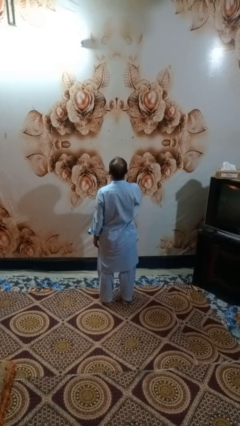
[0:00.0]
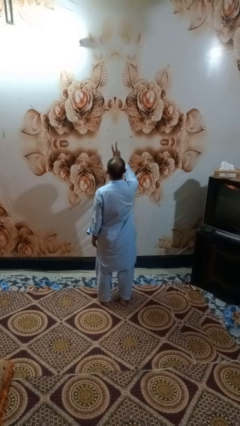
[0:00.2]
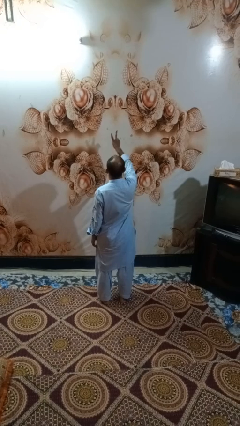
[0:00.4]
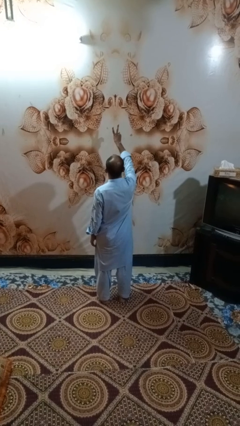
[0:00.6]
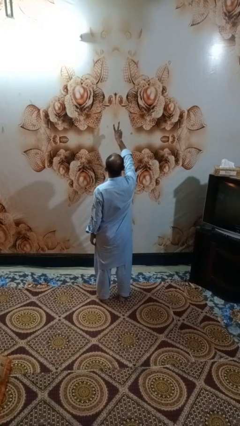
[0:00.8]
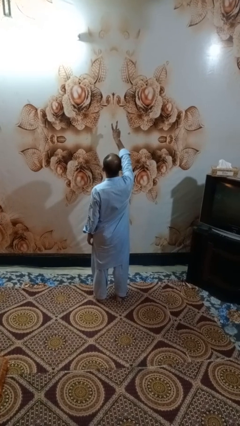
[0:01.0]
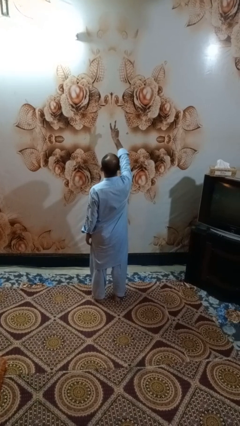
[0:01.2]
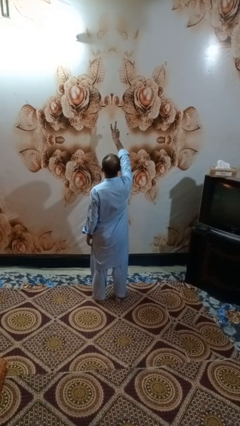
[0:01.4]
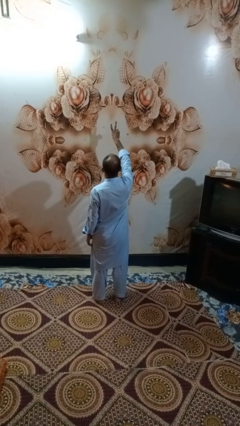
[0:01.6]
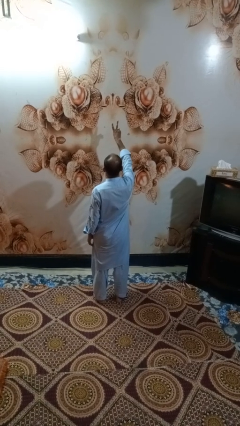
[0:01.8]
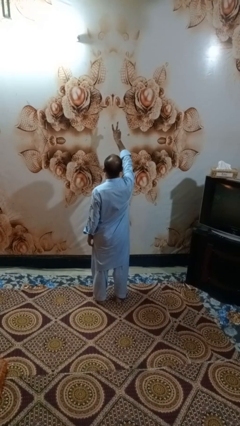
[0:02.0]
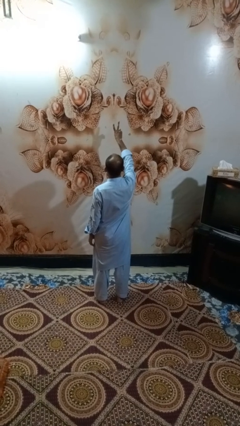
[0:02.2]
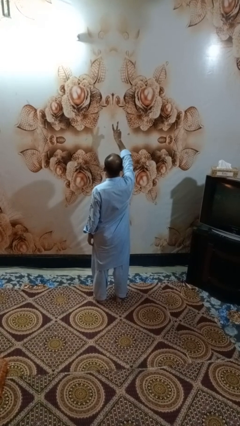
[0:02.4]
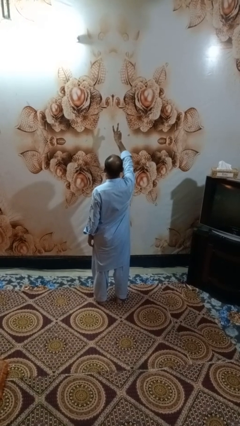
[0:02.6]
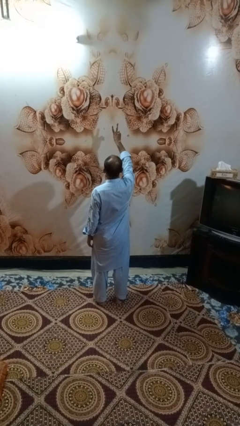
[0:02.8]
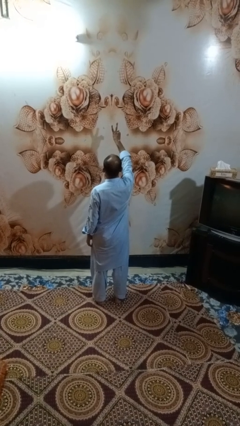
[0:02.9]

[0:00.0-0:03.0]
person gestures peace

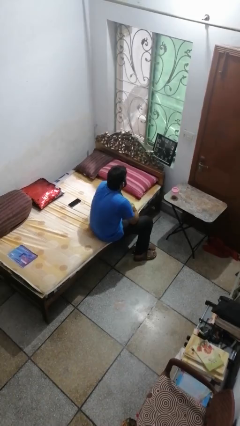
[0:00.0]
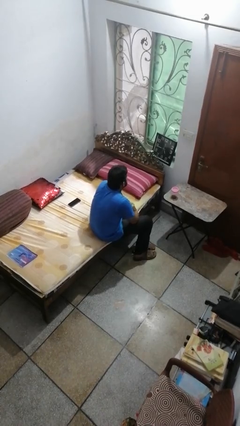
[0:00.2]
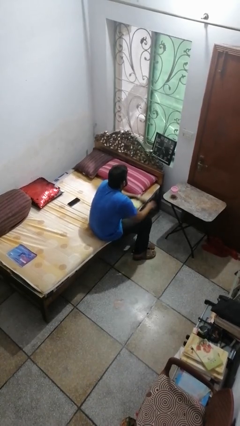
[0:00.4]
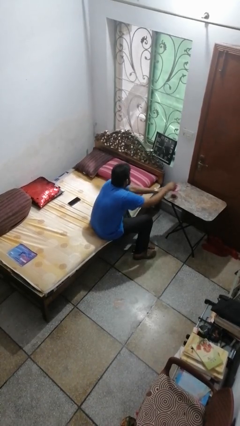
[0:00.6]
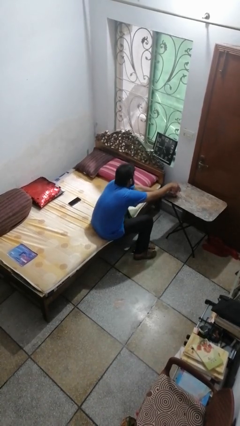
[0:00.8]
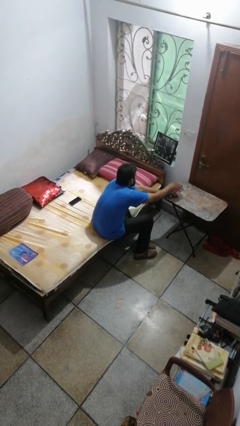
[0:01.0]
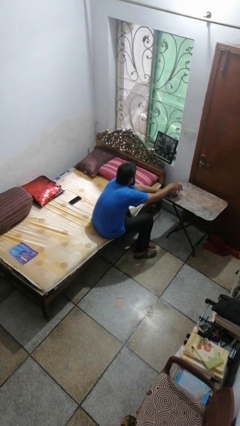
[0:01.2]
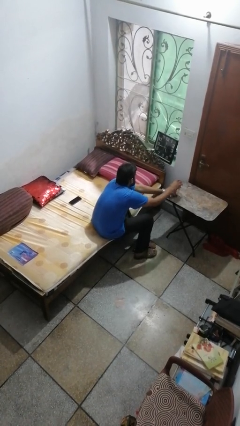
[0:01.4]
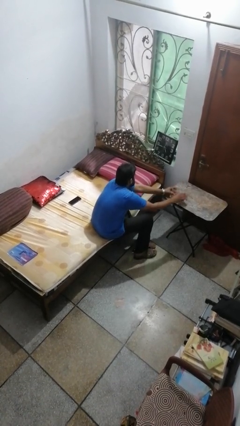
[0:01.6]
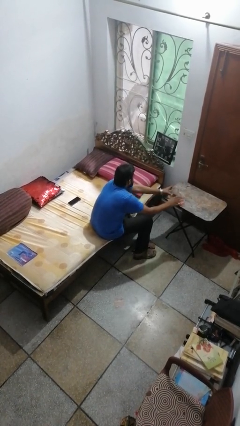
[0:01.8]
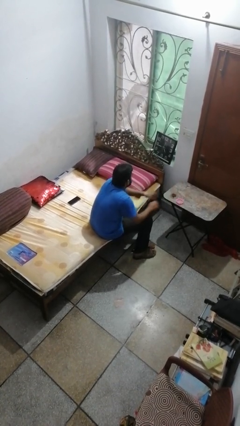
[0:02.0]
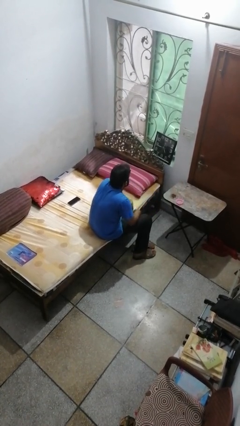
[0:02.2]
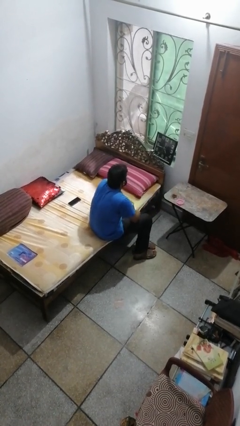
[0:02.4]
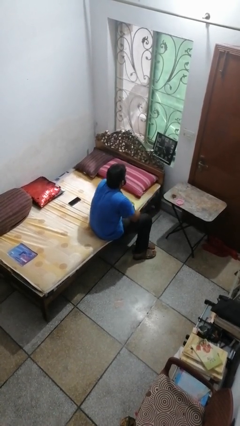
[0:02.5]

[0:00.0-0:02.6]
person opens jar

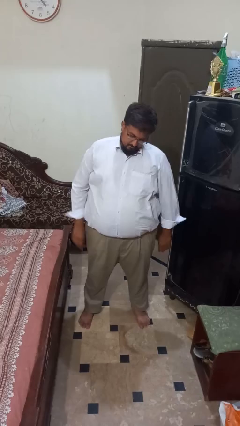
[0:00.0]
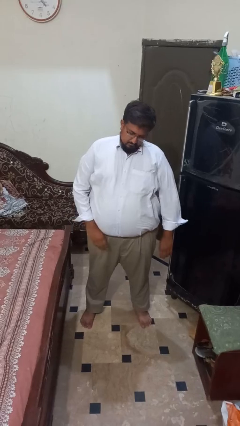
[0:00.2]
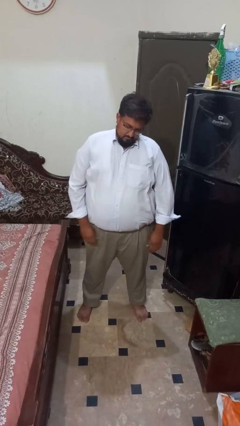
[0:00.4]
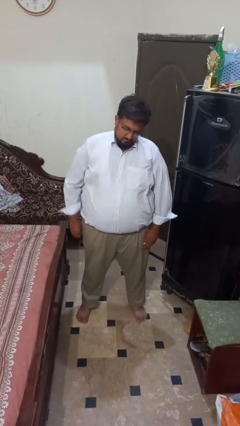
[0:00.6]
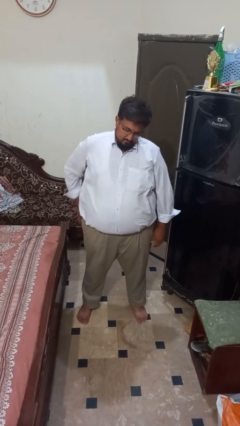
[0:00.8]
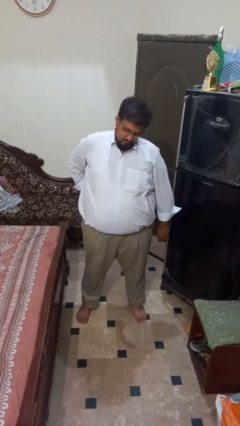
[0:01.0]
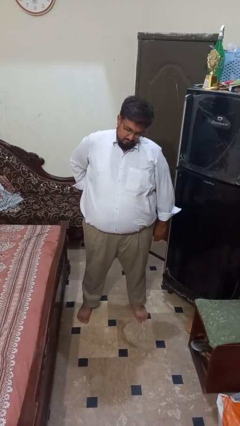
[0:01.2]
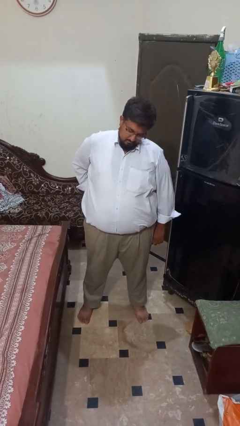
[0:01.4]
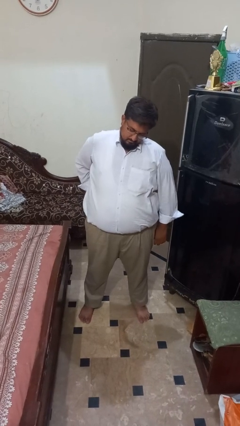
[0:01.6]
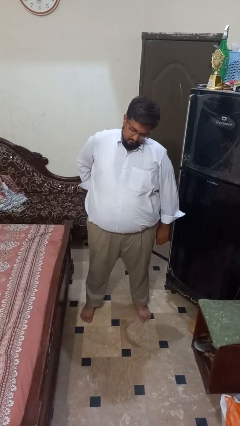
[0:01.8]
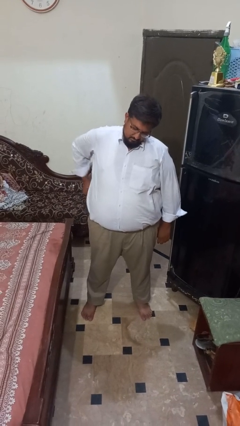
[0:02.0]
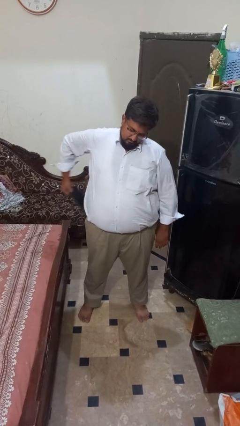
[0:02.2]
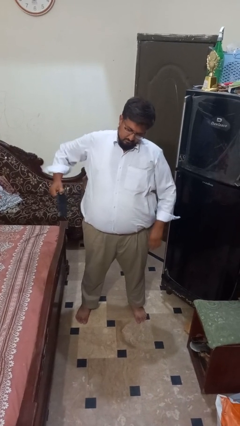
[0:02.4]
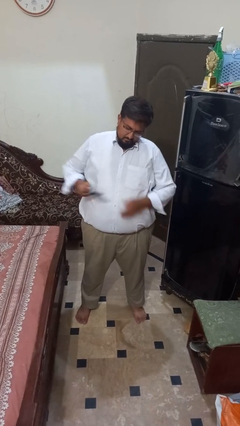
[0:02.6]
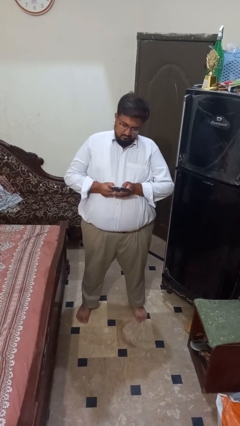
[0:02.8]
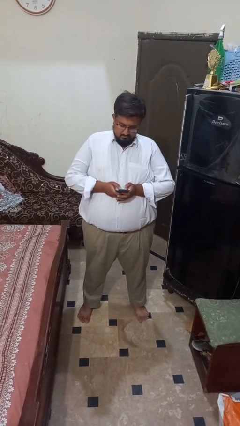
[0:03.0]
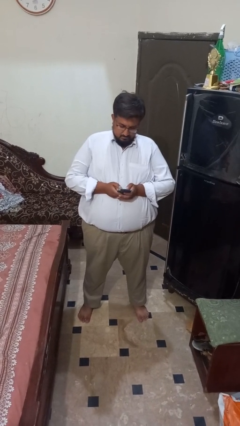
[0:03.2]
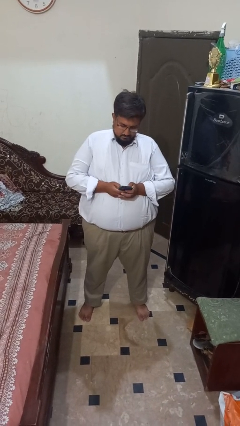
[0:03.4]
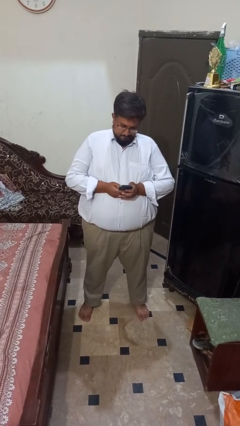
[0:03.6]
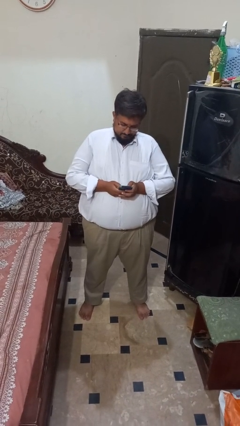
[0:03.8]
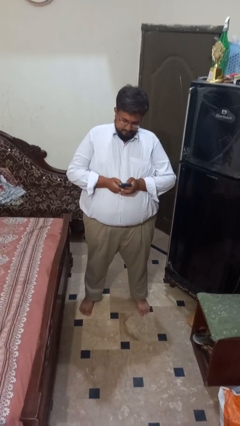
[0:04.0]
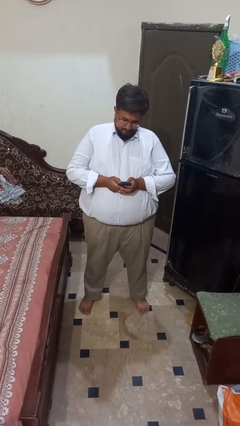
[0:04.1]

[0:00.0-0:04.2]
person takes phone from pocket

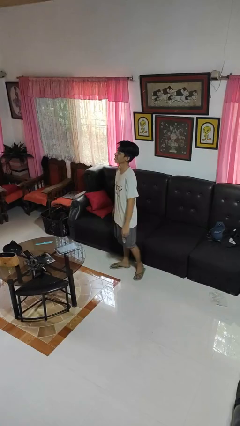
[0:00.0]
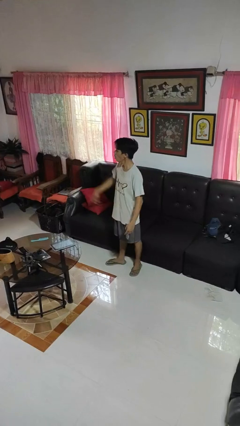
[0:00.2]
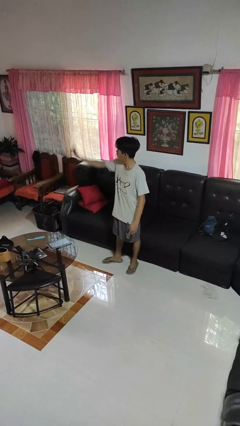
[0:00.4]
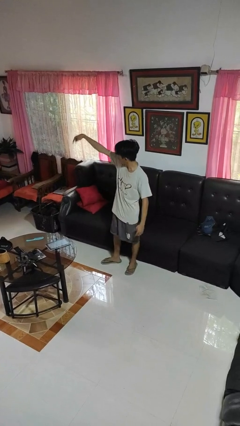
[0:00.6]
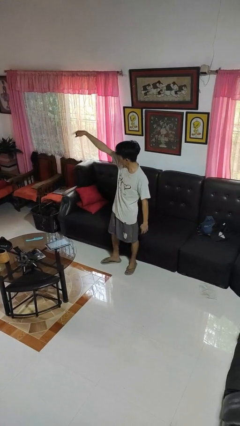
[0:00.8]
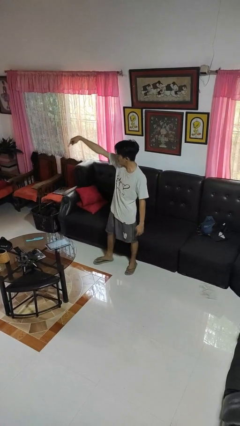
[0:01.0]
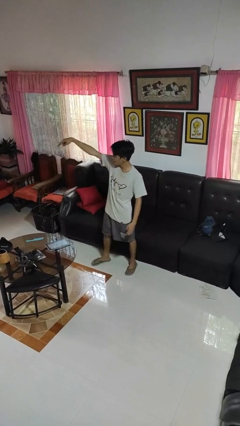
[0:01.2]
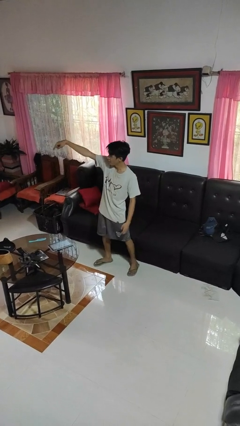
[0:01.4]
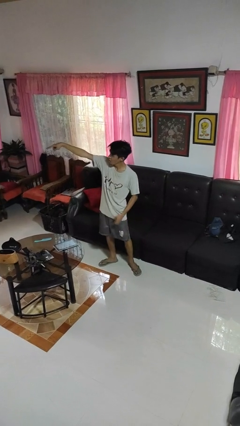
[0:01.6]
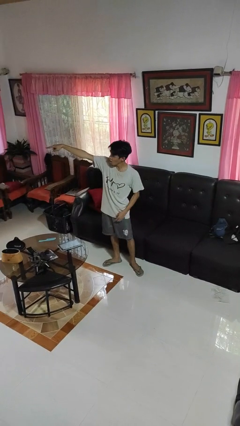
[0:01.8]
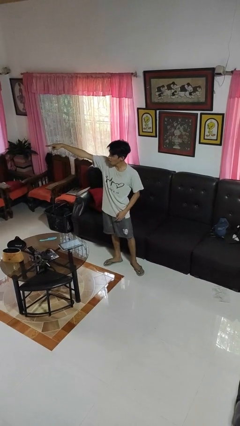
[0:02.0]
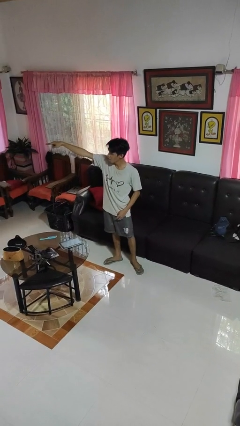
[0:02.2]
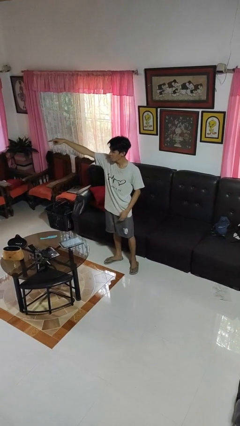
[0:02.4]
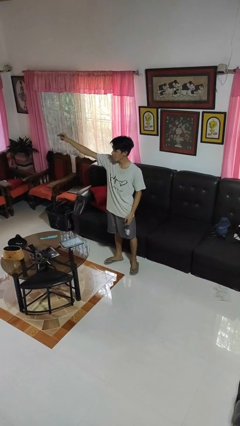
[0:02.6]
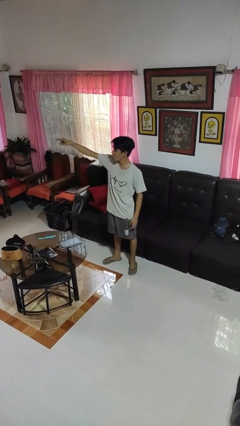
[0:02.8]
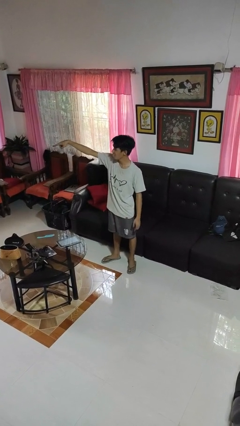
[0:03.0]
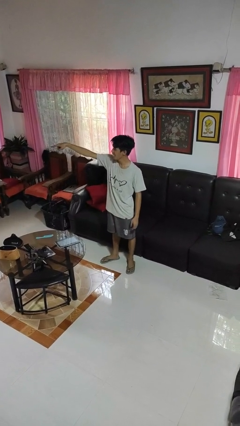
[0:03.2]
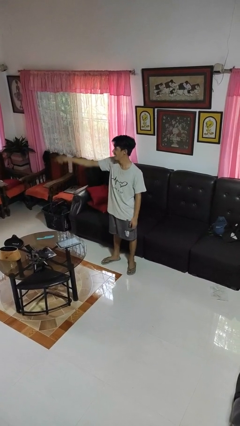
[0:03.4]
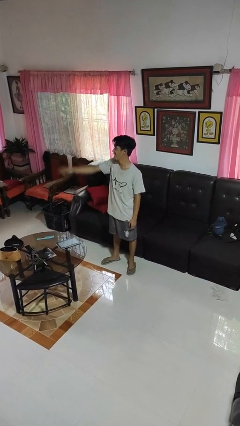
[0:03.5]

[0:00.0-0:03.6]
person points at person

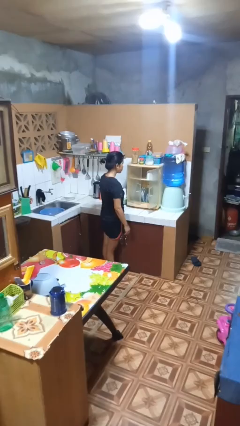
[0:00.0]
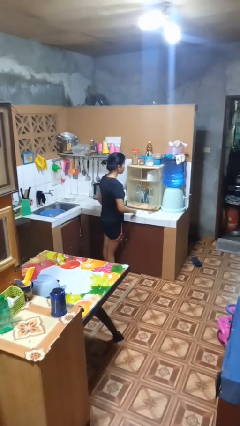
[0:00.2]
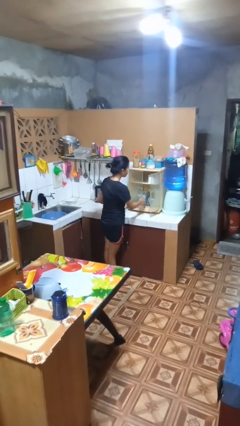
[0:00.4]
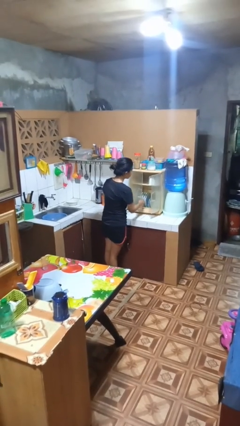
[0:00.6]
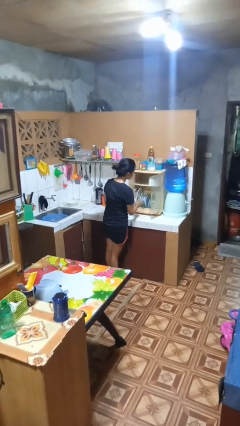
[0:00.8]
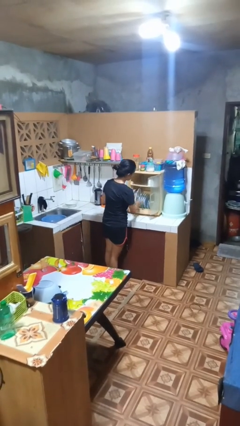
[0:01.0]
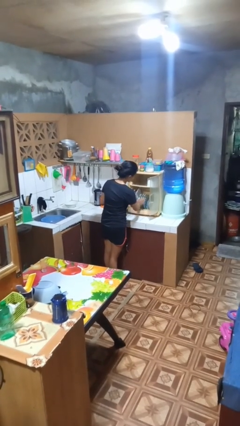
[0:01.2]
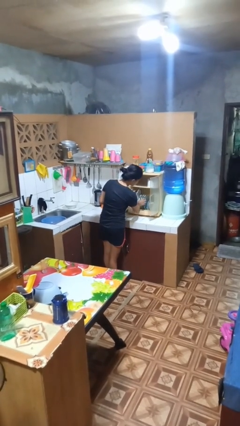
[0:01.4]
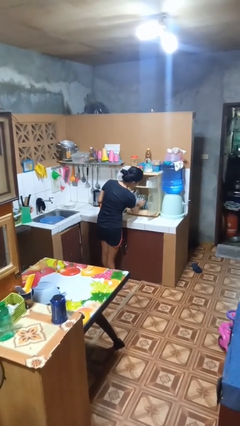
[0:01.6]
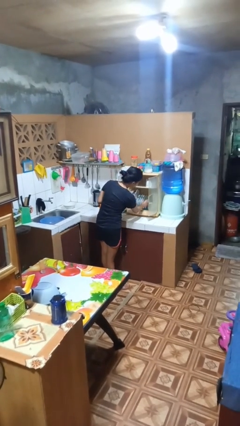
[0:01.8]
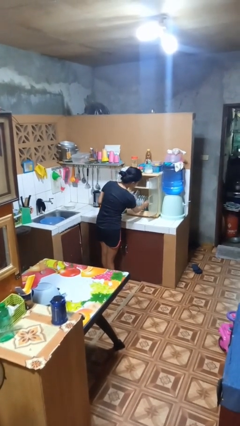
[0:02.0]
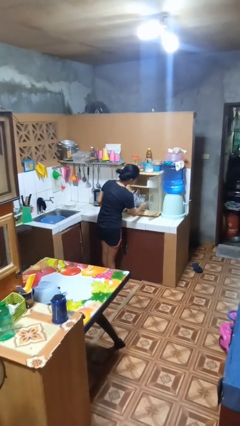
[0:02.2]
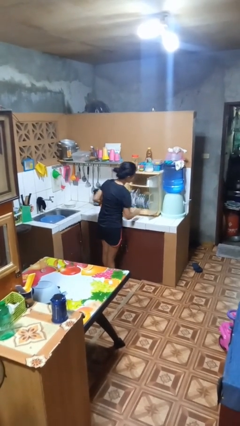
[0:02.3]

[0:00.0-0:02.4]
person searches in kitchen drawer

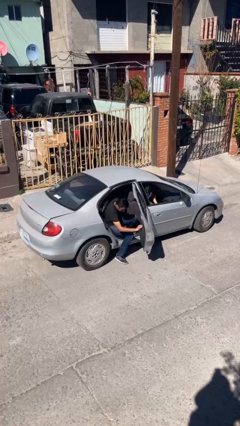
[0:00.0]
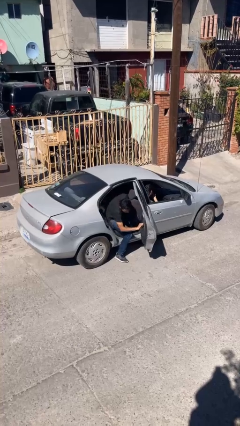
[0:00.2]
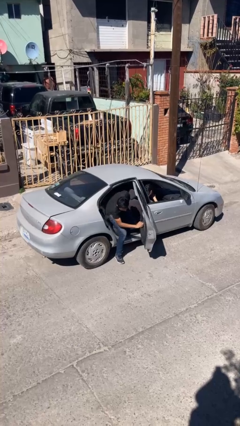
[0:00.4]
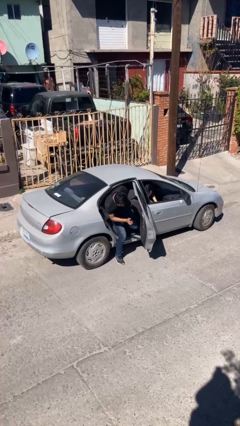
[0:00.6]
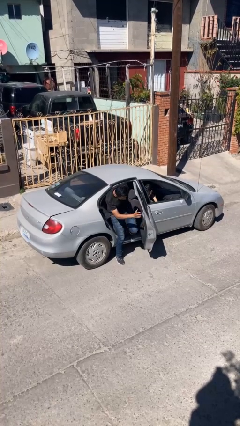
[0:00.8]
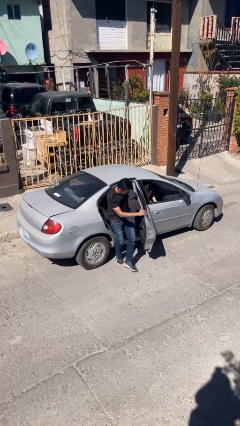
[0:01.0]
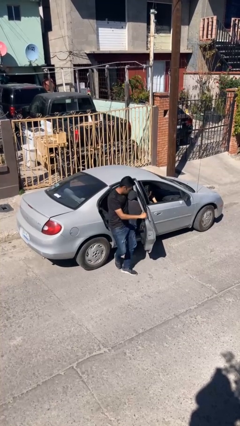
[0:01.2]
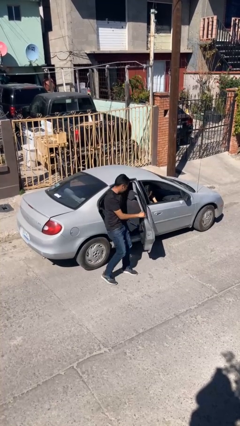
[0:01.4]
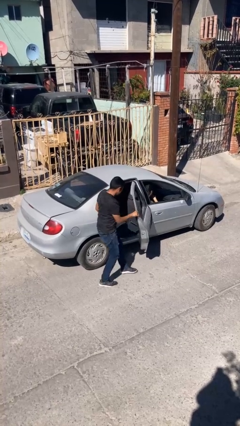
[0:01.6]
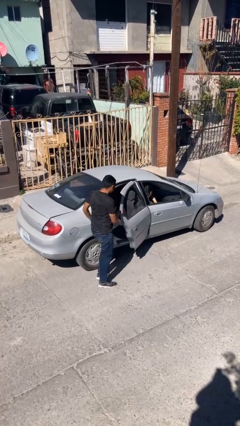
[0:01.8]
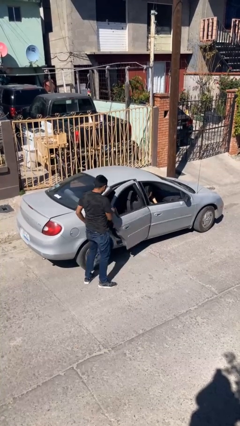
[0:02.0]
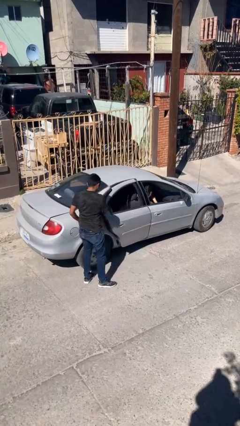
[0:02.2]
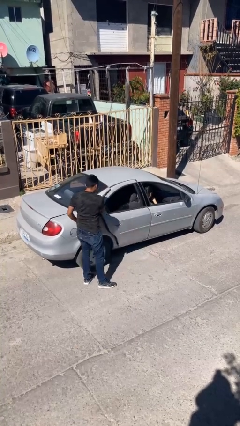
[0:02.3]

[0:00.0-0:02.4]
car drops off person
